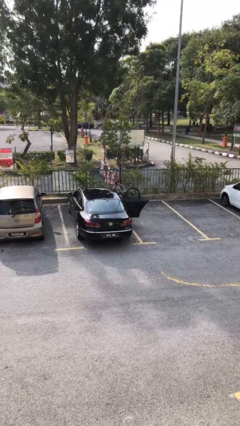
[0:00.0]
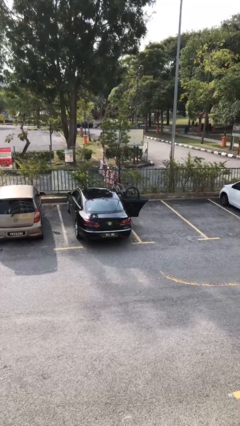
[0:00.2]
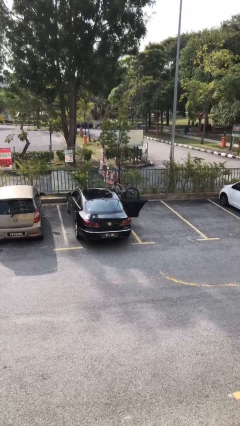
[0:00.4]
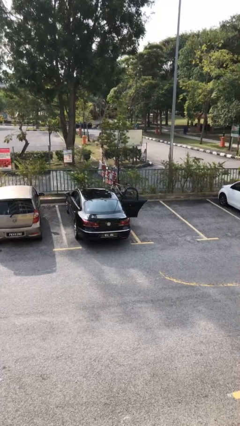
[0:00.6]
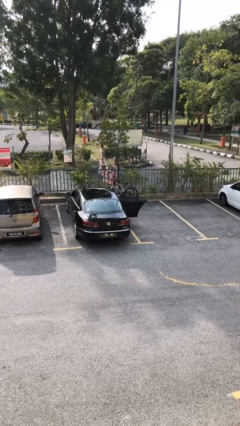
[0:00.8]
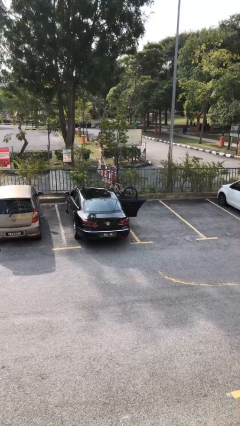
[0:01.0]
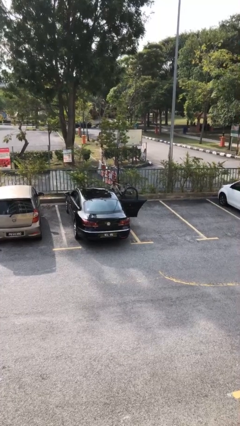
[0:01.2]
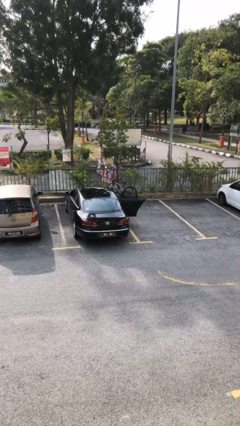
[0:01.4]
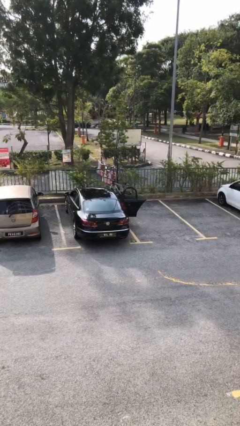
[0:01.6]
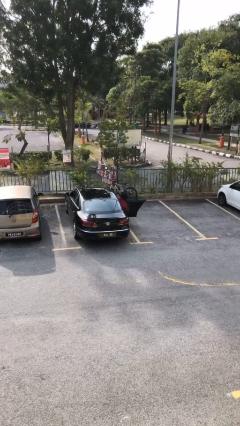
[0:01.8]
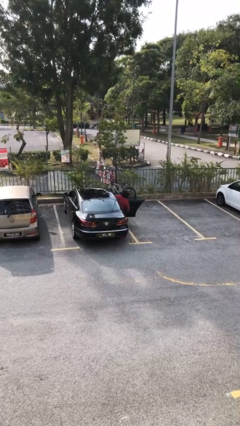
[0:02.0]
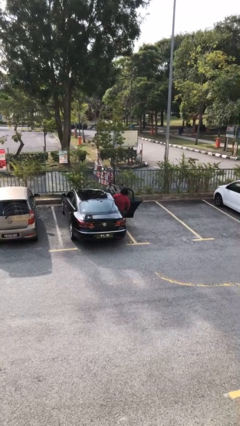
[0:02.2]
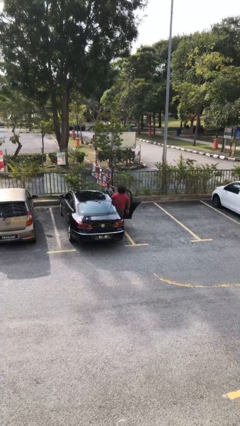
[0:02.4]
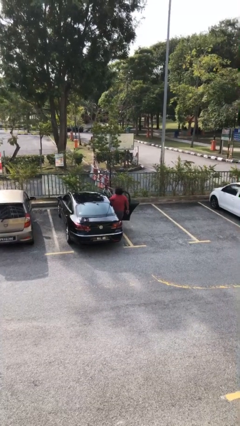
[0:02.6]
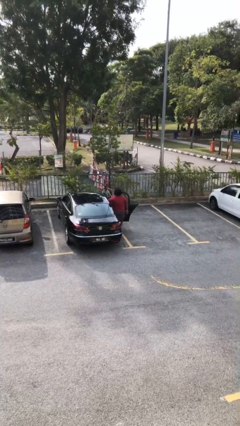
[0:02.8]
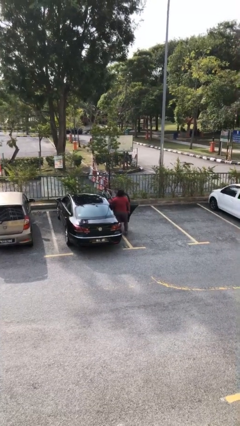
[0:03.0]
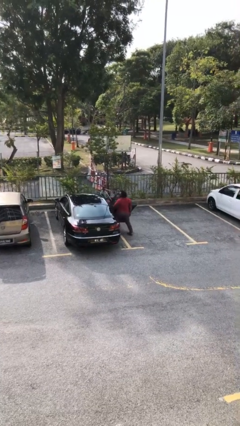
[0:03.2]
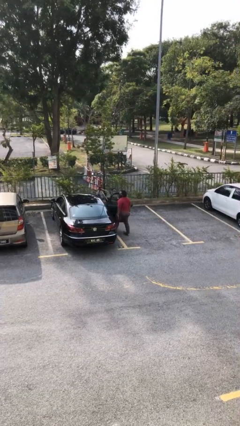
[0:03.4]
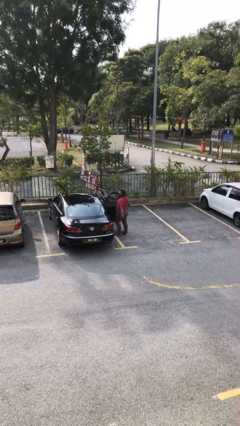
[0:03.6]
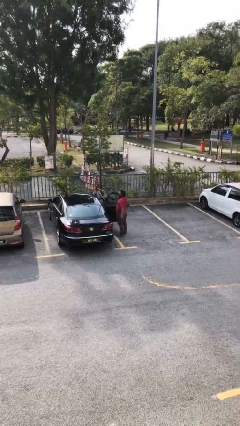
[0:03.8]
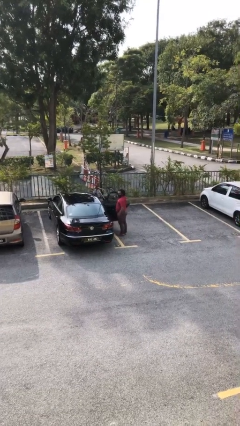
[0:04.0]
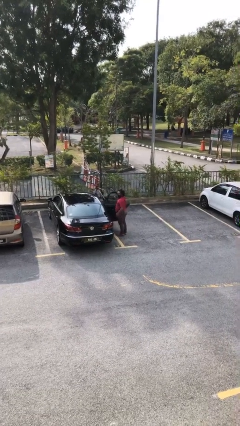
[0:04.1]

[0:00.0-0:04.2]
person exits car

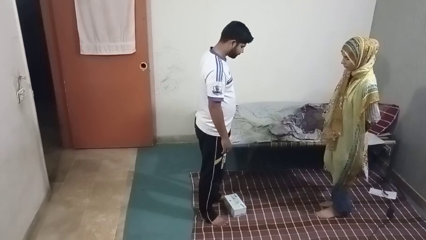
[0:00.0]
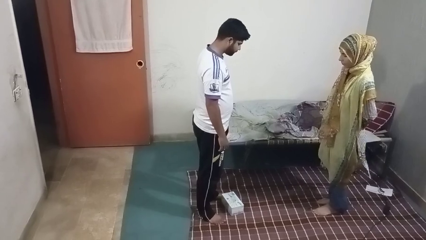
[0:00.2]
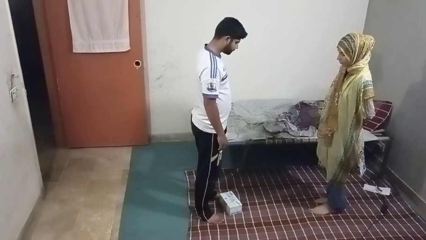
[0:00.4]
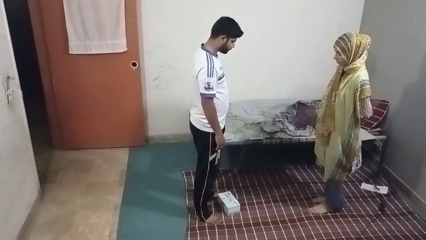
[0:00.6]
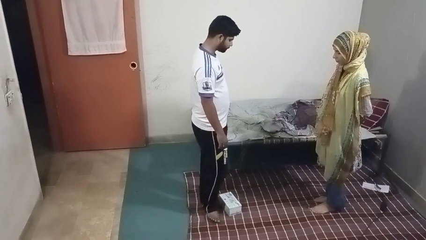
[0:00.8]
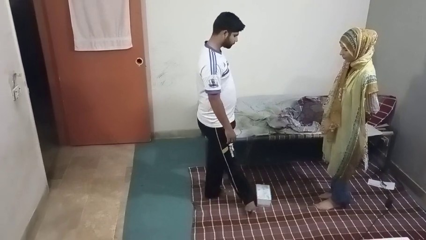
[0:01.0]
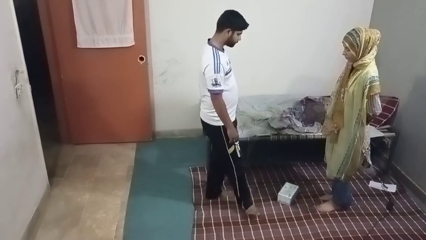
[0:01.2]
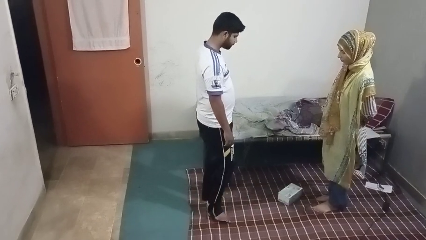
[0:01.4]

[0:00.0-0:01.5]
person kicks object to person

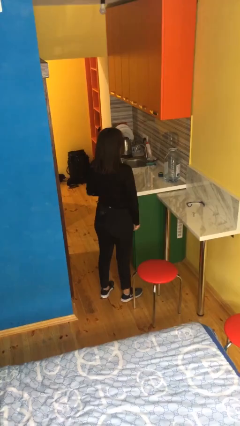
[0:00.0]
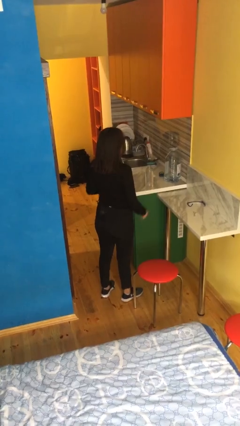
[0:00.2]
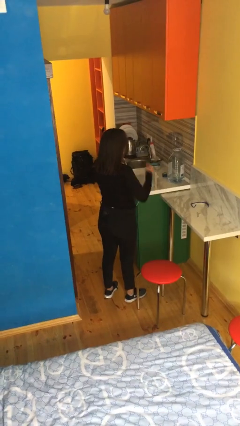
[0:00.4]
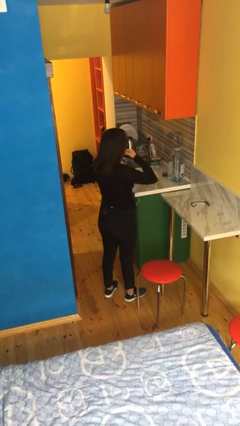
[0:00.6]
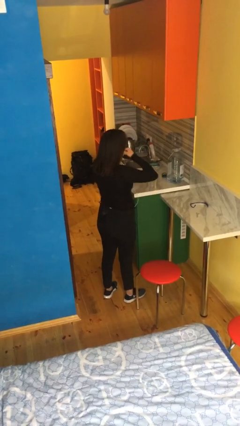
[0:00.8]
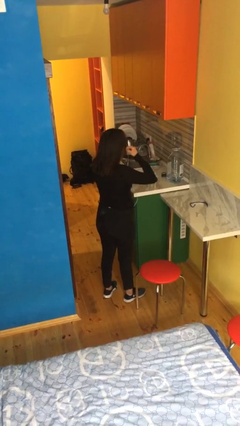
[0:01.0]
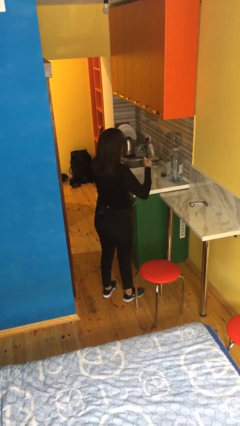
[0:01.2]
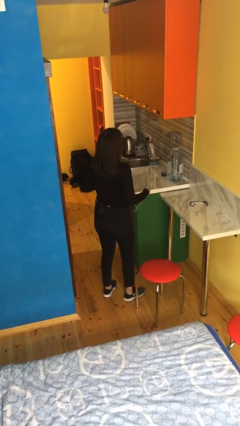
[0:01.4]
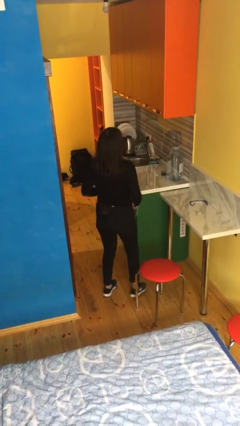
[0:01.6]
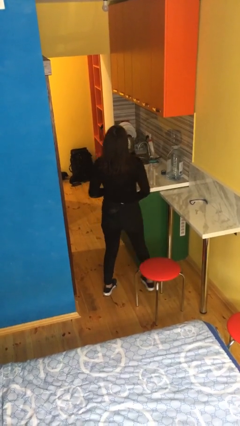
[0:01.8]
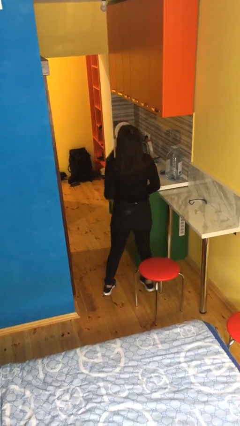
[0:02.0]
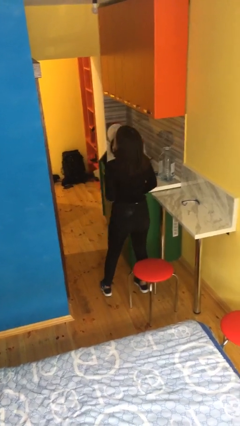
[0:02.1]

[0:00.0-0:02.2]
person takes off headphones

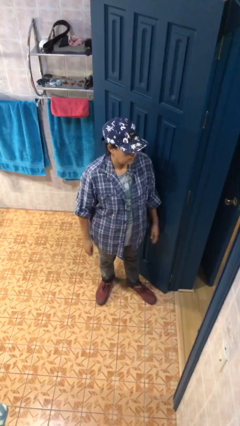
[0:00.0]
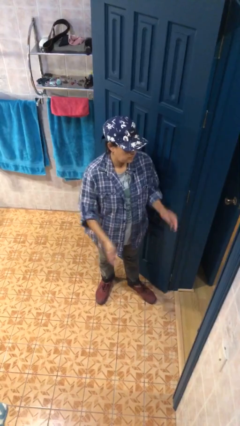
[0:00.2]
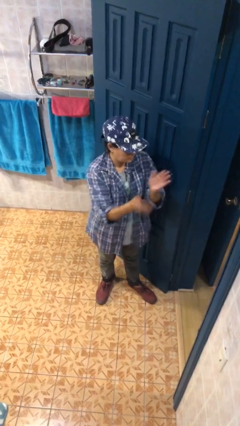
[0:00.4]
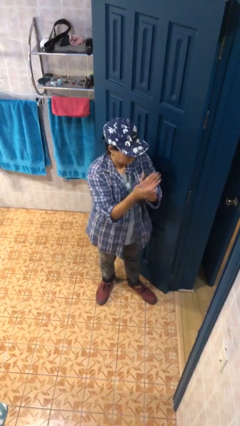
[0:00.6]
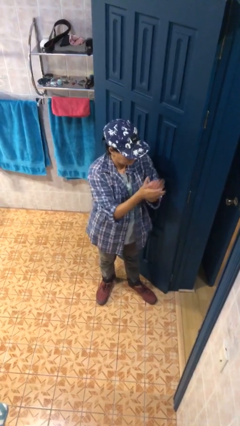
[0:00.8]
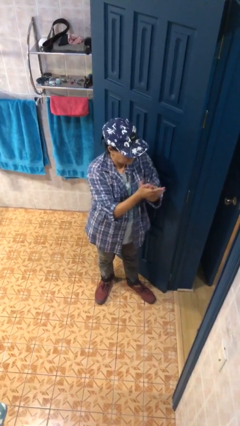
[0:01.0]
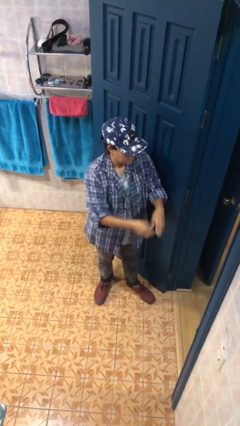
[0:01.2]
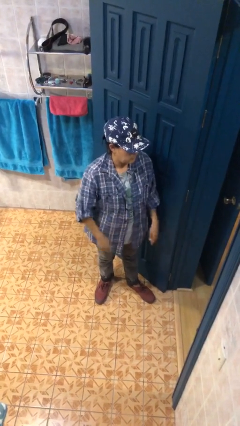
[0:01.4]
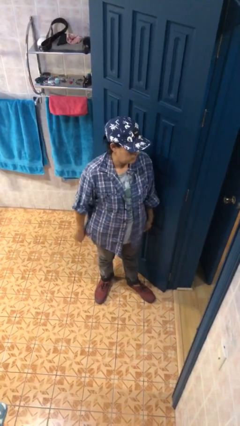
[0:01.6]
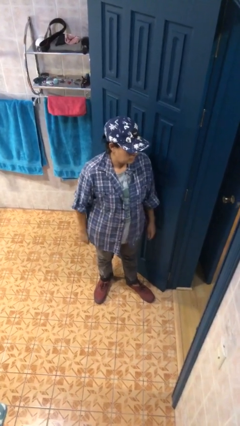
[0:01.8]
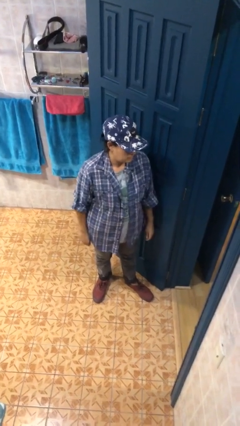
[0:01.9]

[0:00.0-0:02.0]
person claps hands

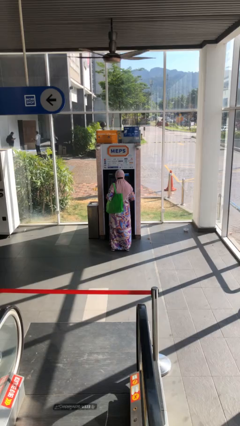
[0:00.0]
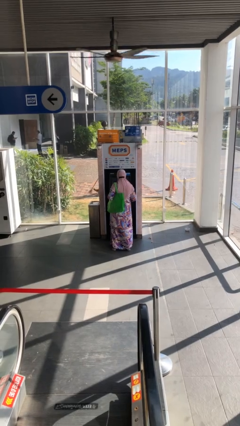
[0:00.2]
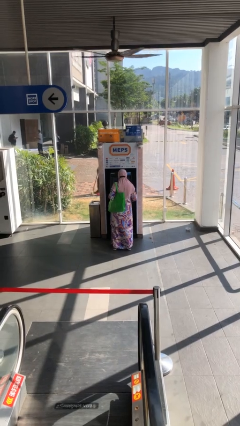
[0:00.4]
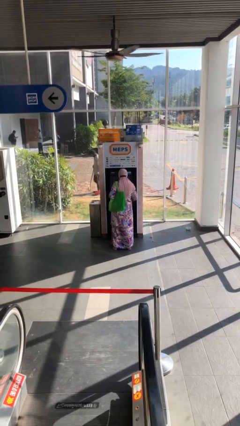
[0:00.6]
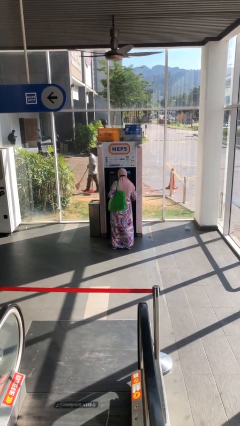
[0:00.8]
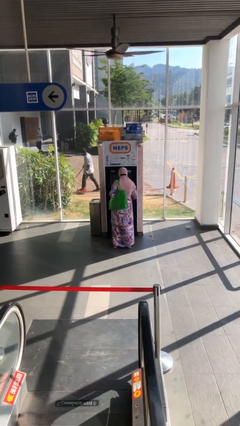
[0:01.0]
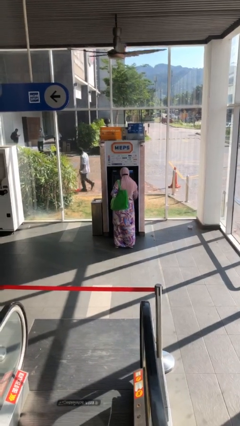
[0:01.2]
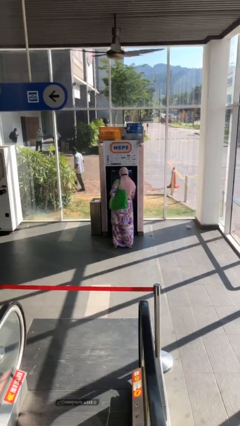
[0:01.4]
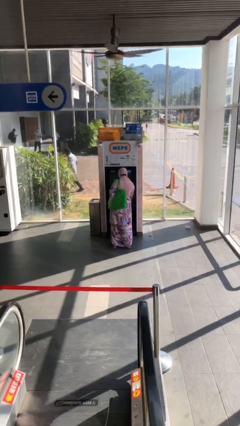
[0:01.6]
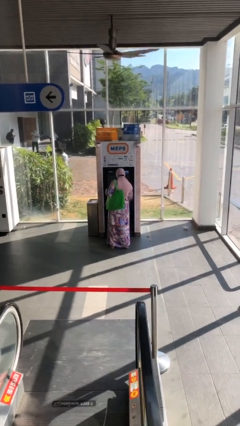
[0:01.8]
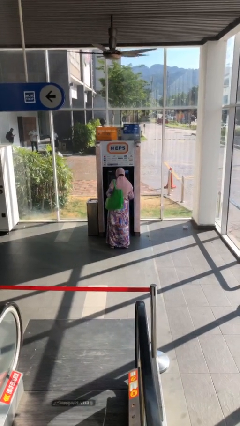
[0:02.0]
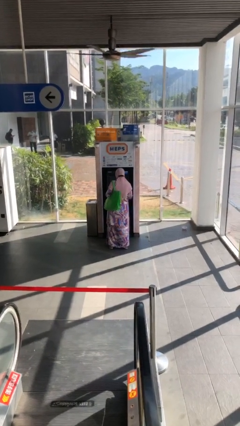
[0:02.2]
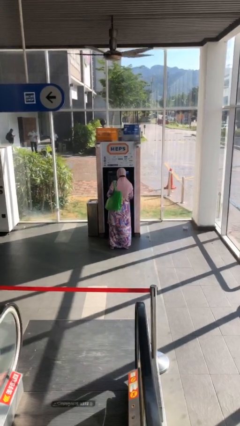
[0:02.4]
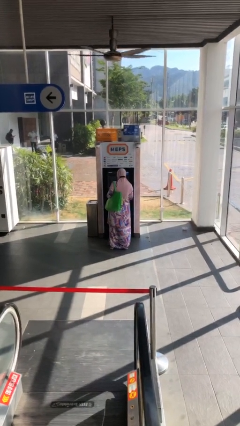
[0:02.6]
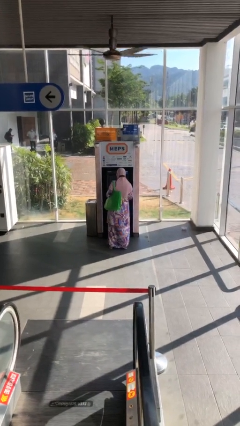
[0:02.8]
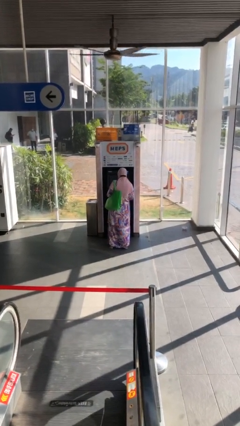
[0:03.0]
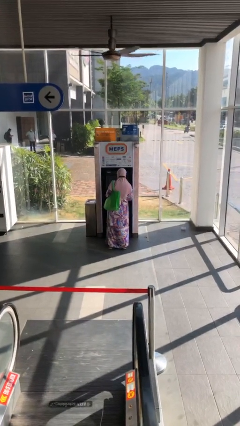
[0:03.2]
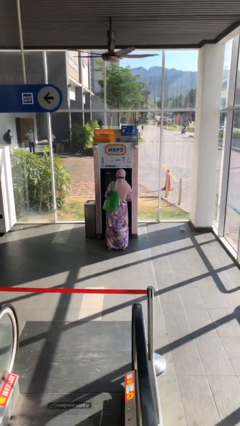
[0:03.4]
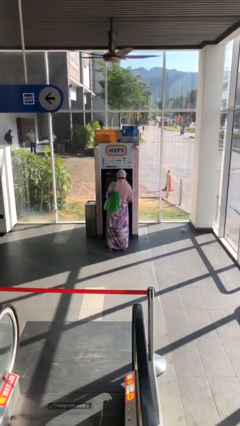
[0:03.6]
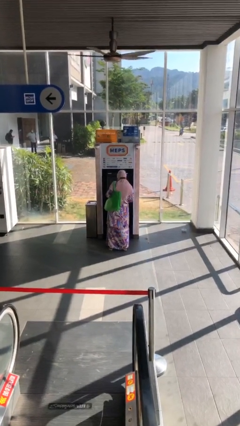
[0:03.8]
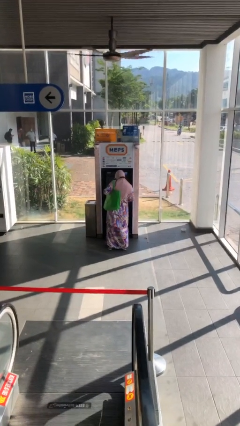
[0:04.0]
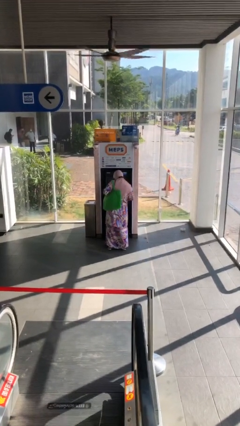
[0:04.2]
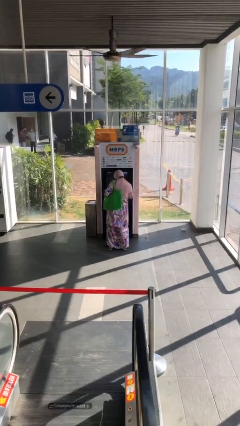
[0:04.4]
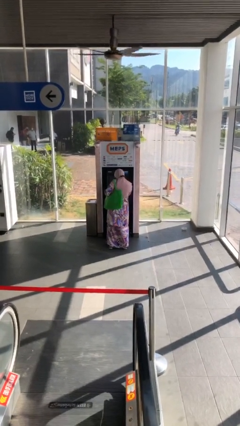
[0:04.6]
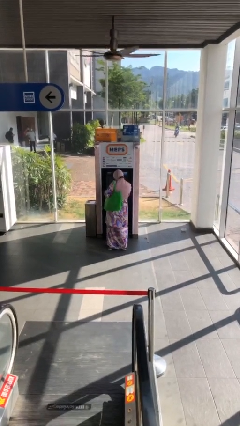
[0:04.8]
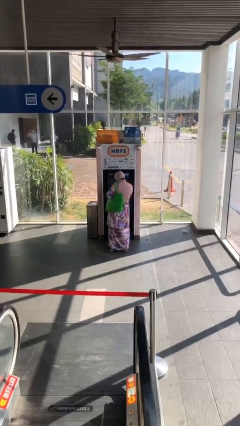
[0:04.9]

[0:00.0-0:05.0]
person purchases from machine

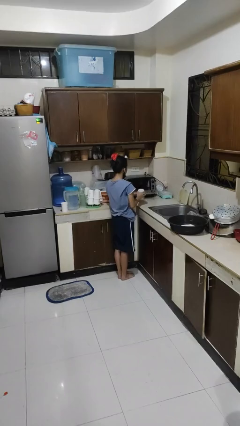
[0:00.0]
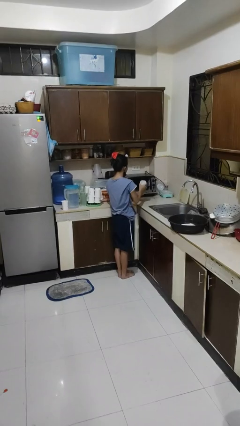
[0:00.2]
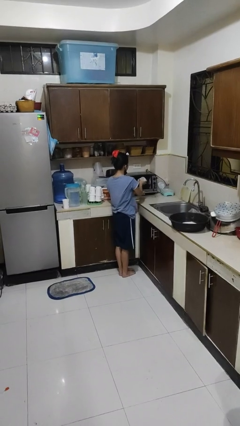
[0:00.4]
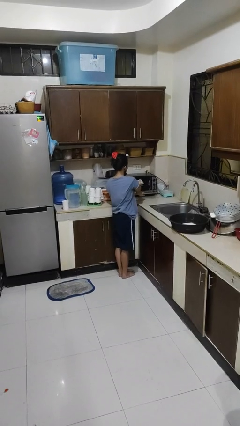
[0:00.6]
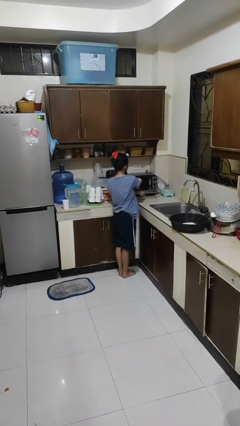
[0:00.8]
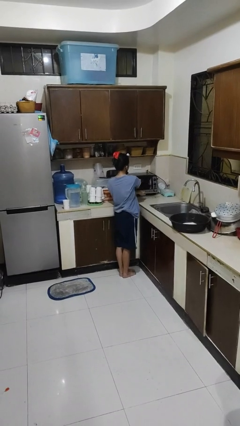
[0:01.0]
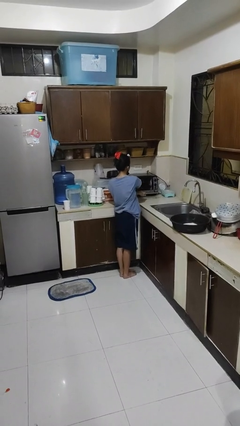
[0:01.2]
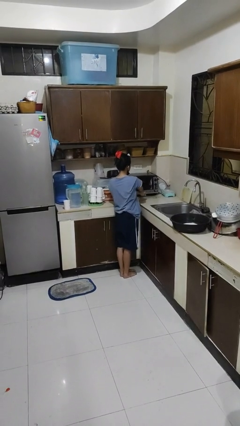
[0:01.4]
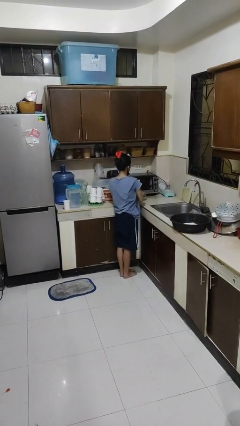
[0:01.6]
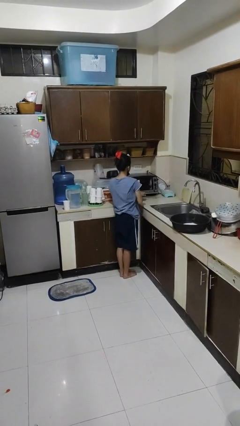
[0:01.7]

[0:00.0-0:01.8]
person puts object into microwave

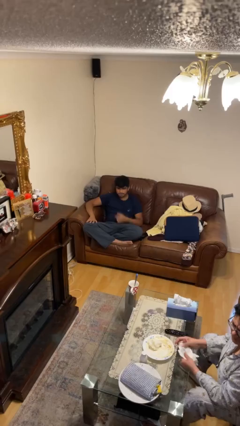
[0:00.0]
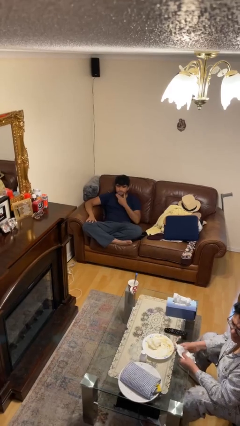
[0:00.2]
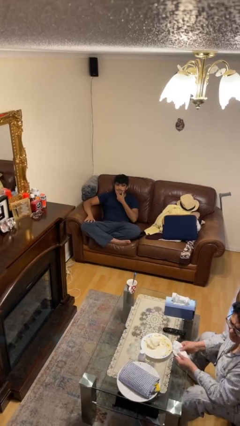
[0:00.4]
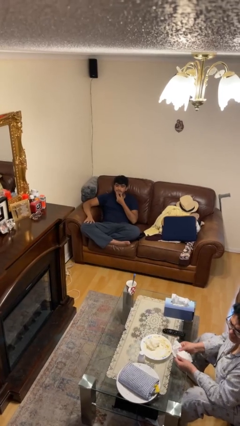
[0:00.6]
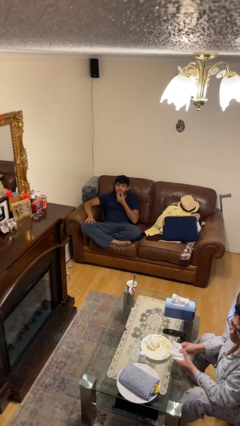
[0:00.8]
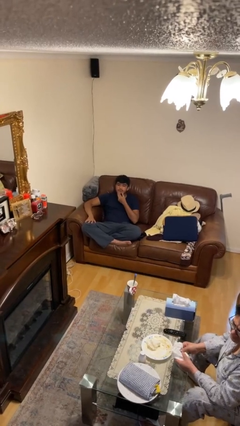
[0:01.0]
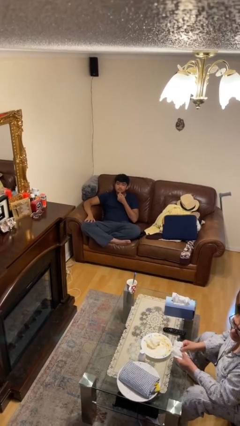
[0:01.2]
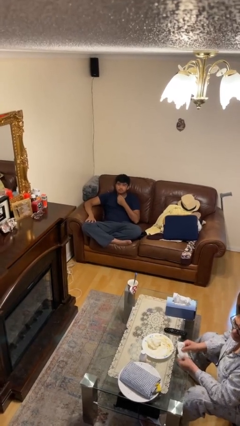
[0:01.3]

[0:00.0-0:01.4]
person strokes chin
